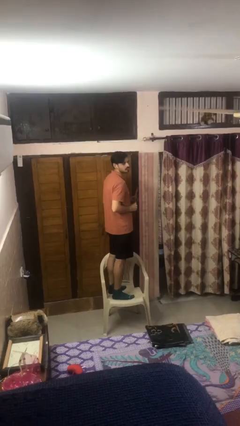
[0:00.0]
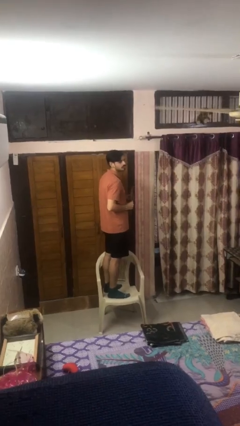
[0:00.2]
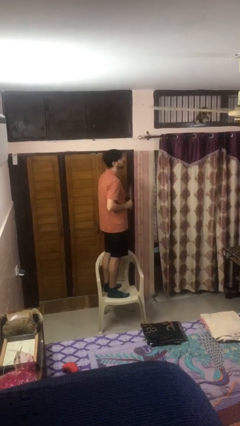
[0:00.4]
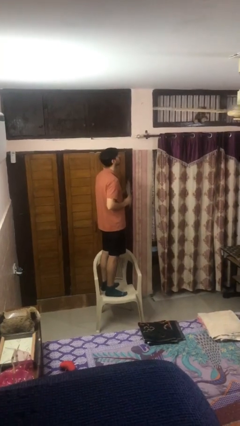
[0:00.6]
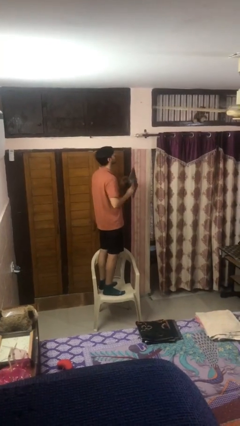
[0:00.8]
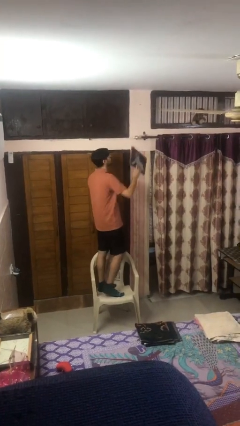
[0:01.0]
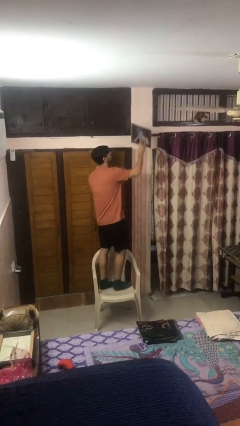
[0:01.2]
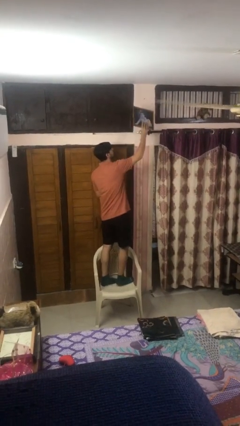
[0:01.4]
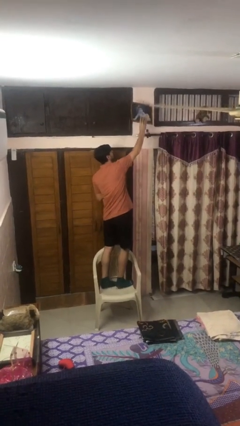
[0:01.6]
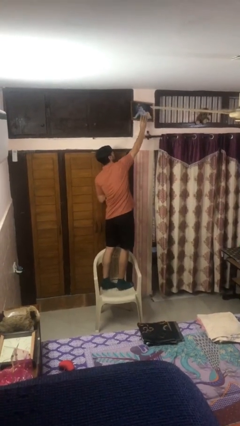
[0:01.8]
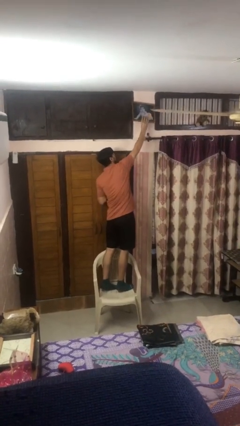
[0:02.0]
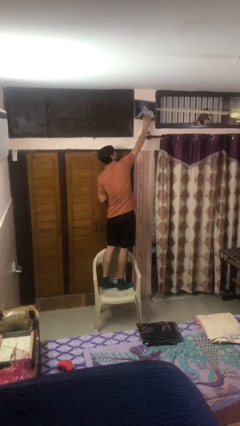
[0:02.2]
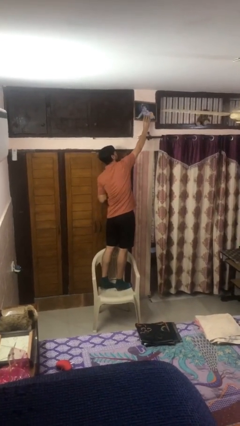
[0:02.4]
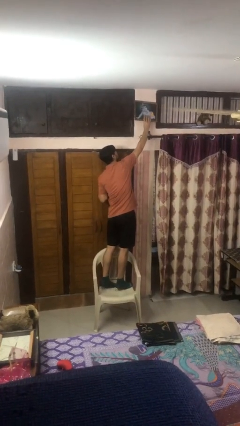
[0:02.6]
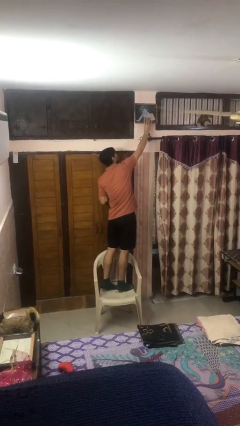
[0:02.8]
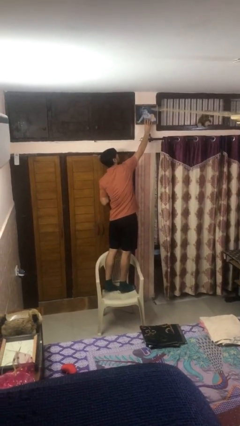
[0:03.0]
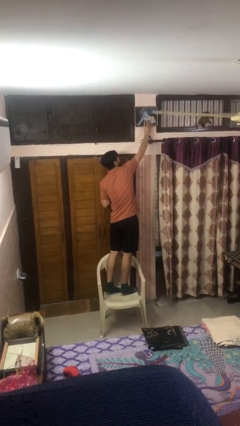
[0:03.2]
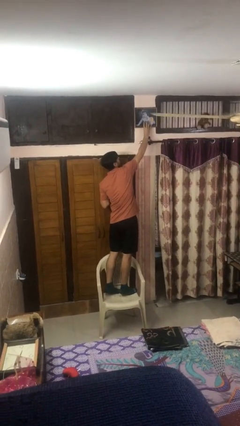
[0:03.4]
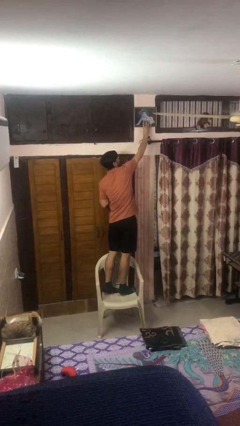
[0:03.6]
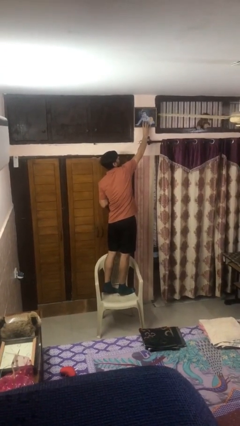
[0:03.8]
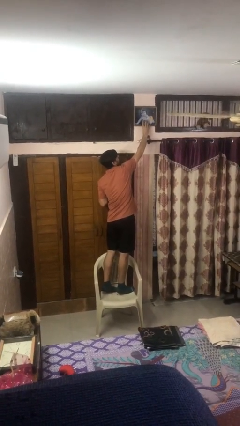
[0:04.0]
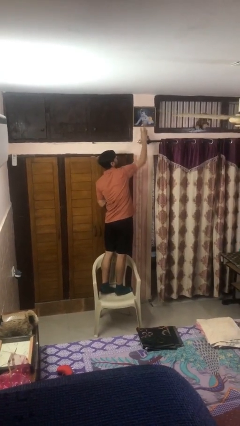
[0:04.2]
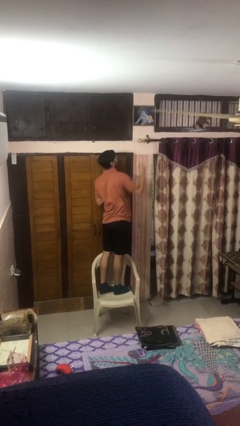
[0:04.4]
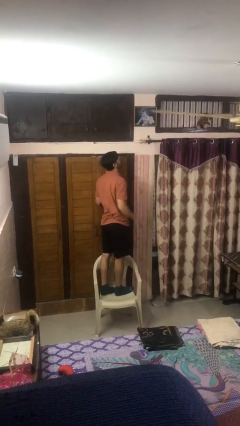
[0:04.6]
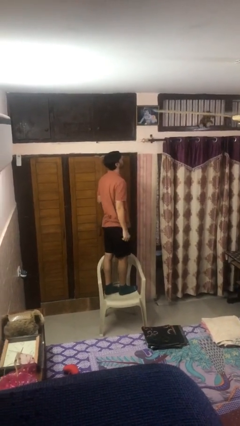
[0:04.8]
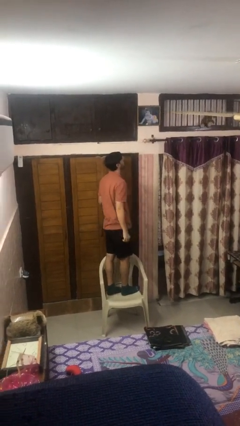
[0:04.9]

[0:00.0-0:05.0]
person puts up picture frame

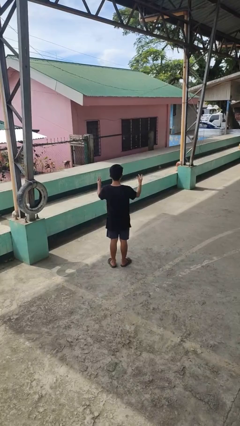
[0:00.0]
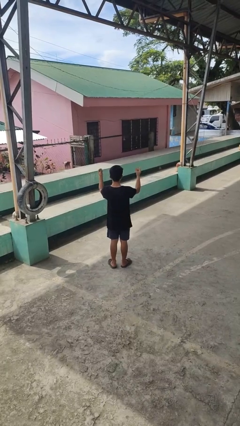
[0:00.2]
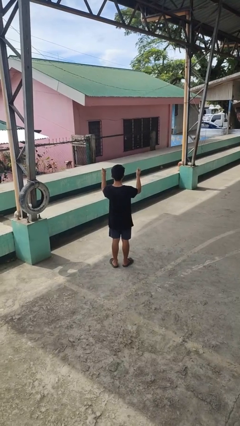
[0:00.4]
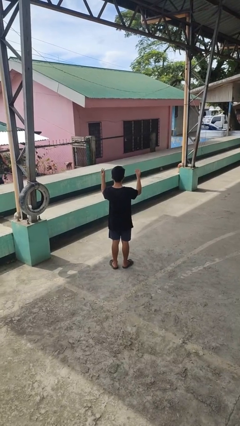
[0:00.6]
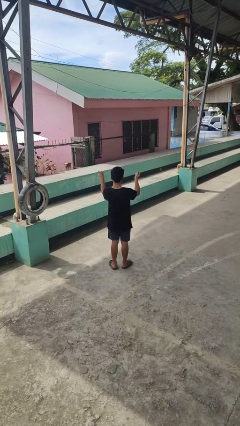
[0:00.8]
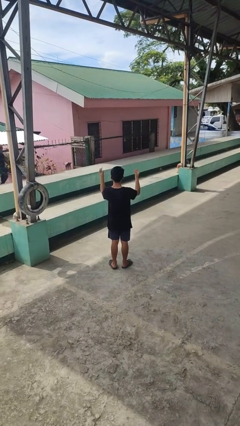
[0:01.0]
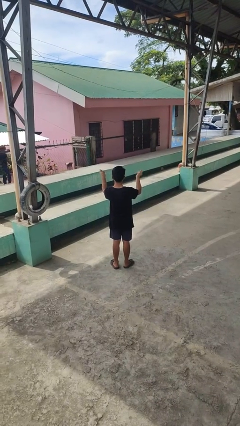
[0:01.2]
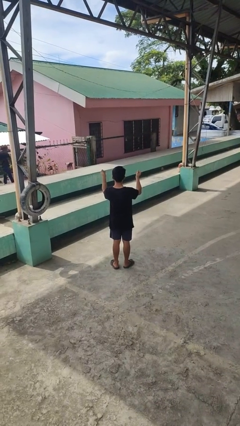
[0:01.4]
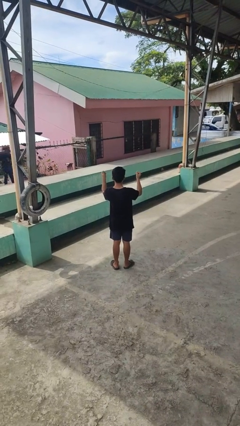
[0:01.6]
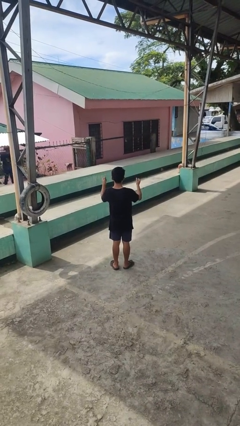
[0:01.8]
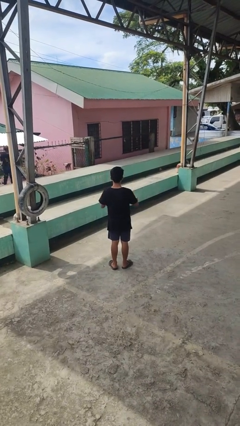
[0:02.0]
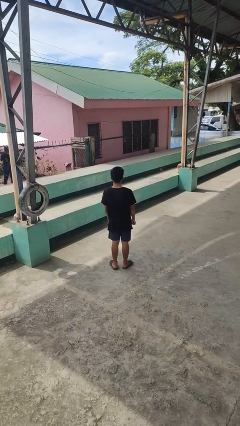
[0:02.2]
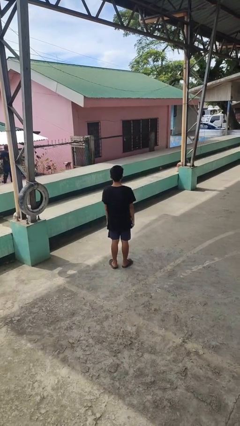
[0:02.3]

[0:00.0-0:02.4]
person snaps fingers

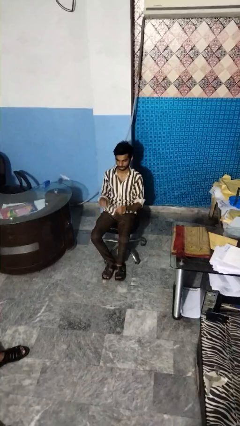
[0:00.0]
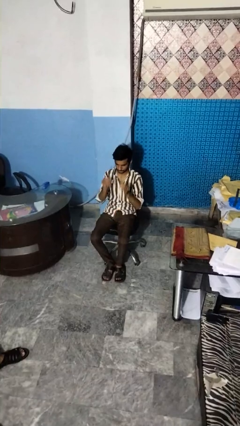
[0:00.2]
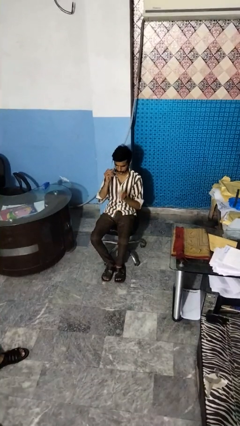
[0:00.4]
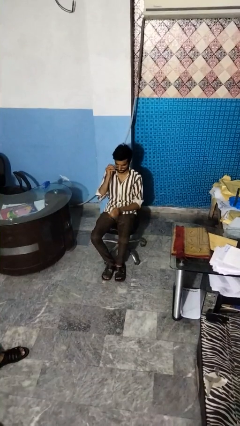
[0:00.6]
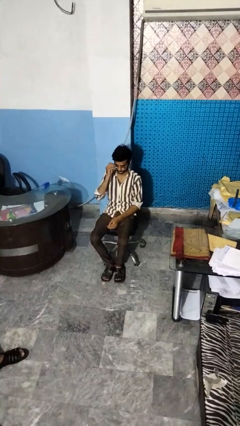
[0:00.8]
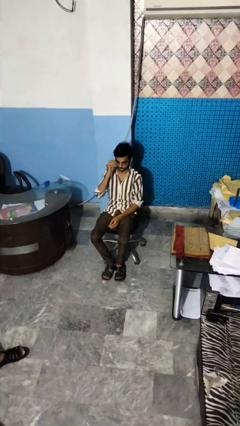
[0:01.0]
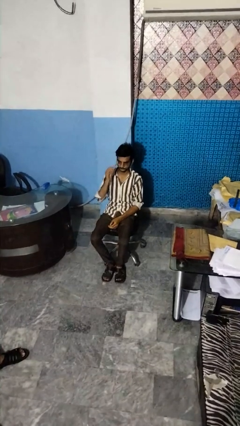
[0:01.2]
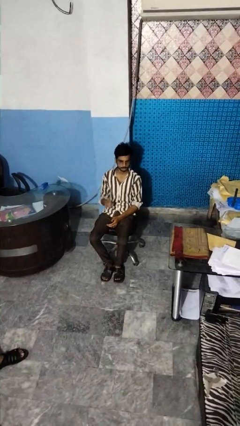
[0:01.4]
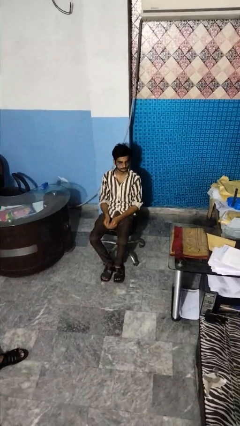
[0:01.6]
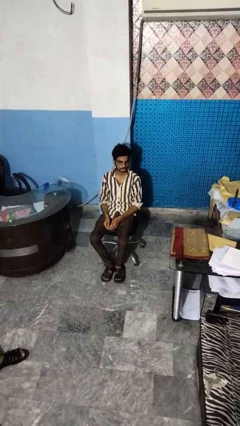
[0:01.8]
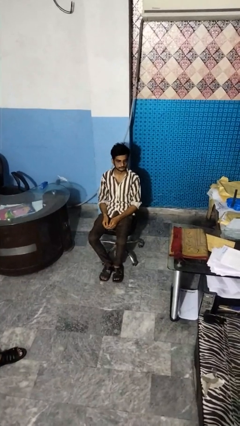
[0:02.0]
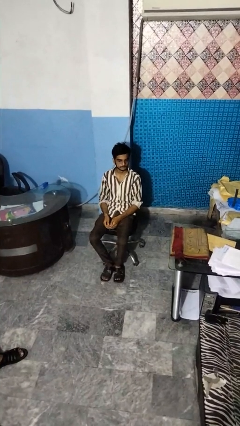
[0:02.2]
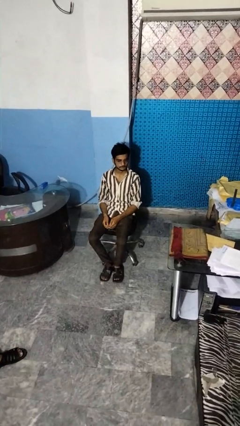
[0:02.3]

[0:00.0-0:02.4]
person puts on glasses

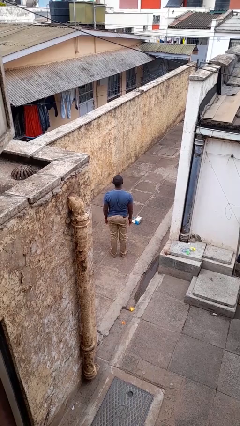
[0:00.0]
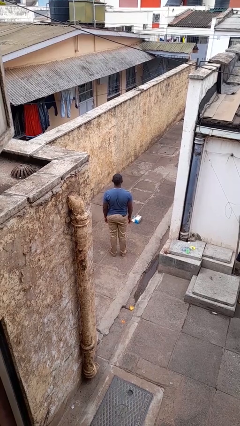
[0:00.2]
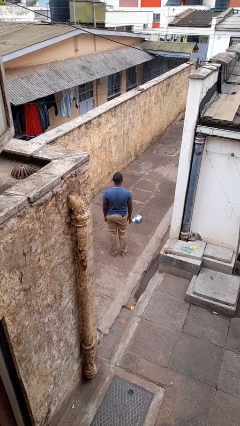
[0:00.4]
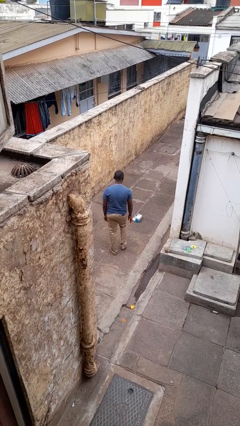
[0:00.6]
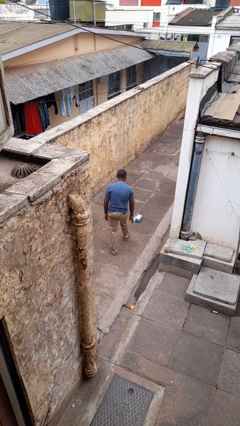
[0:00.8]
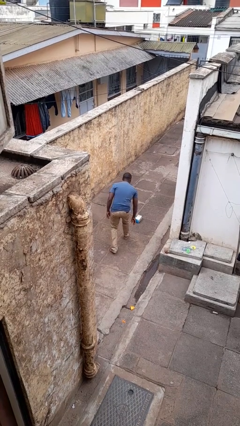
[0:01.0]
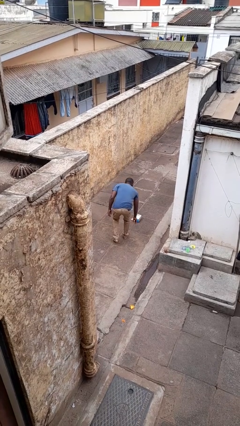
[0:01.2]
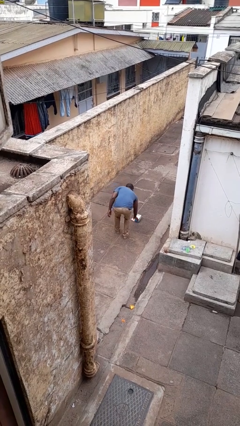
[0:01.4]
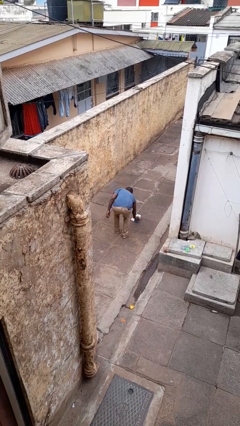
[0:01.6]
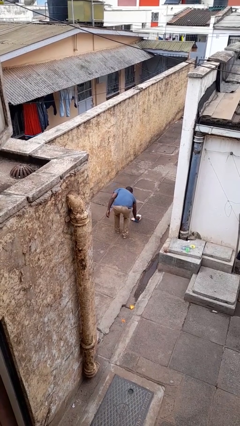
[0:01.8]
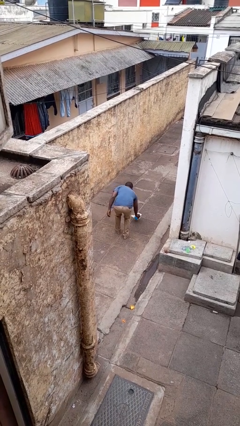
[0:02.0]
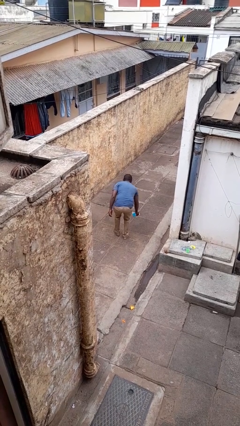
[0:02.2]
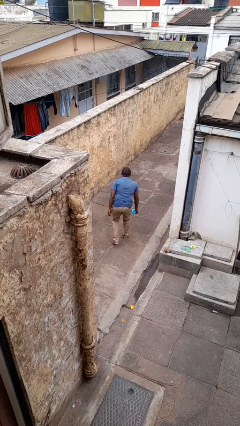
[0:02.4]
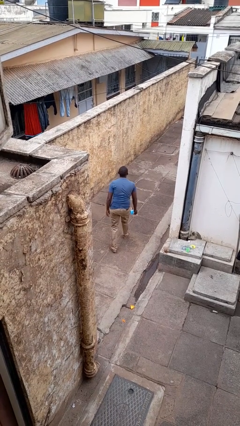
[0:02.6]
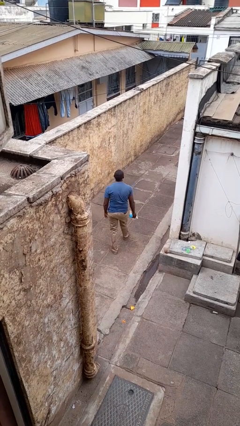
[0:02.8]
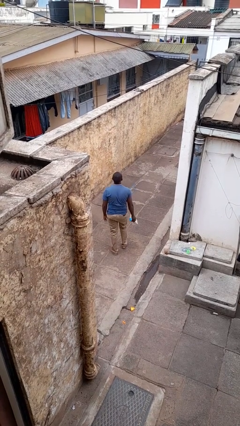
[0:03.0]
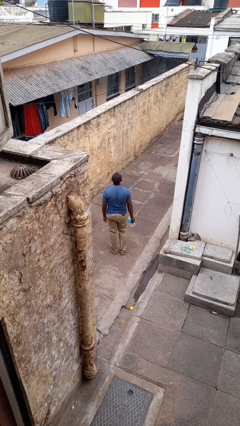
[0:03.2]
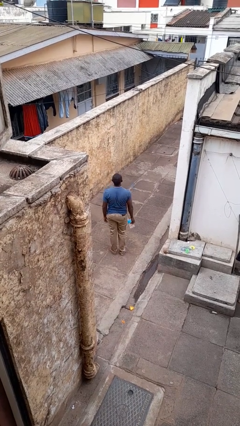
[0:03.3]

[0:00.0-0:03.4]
person picks up object from floor

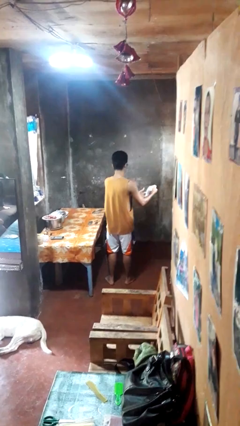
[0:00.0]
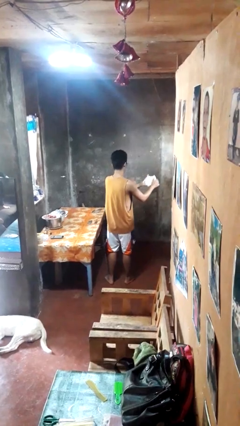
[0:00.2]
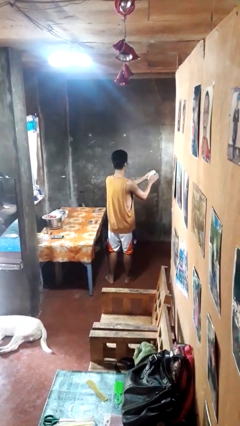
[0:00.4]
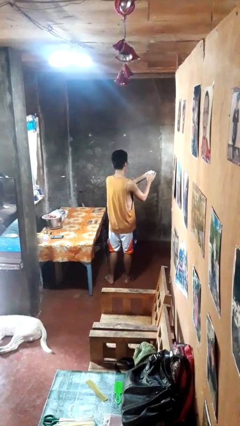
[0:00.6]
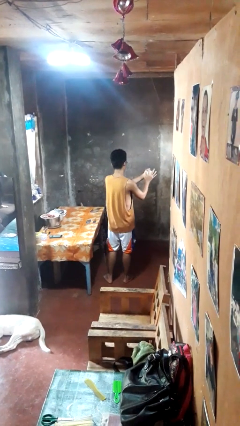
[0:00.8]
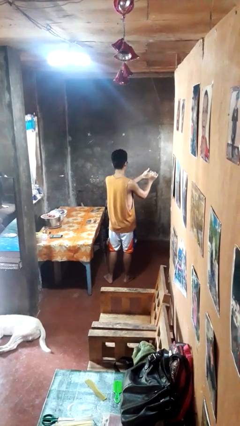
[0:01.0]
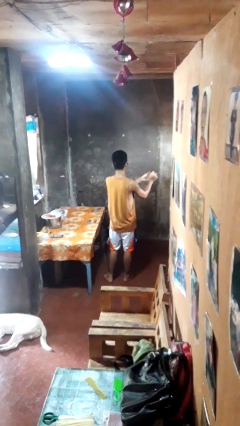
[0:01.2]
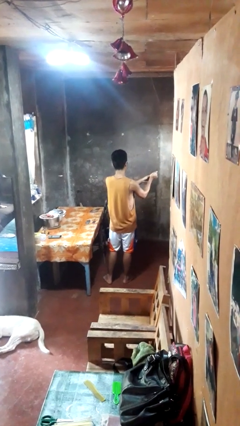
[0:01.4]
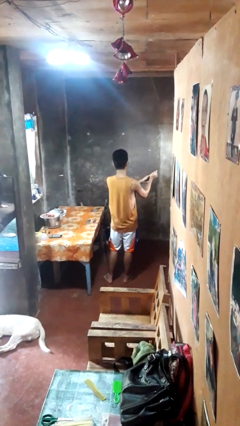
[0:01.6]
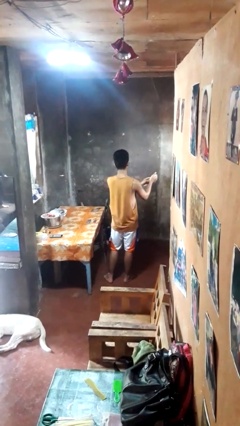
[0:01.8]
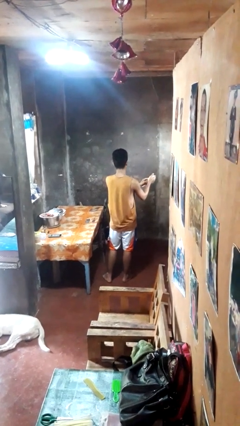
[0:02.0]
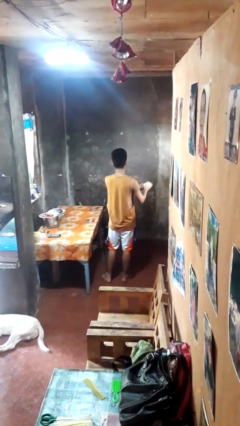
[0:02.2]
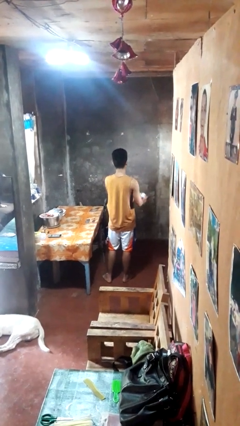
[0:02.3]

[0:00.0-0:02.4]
person crumples paper

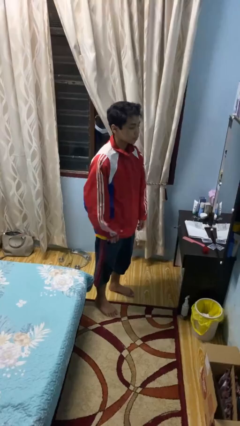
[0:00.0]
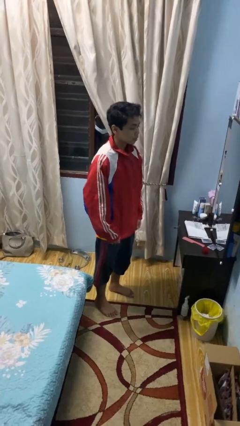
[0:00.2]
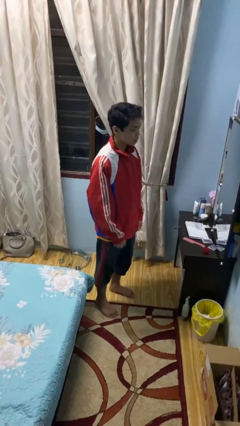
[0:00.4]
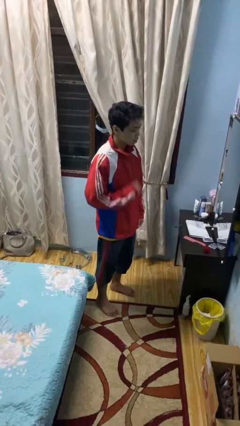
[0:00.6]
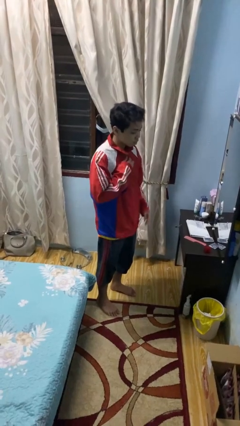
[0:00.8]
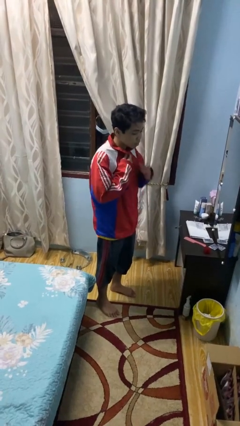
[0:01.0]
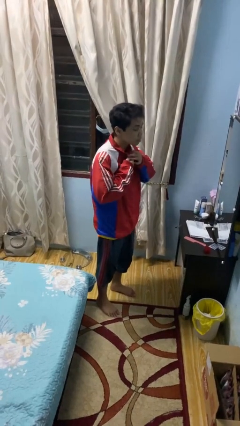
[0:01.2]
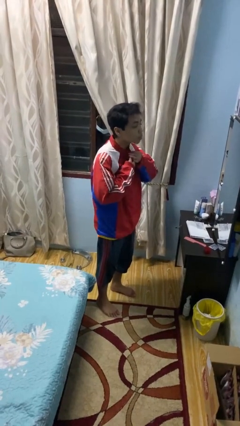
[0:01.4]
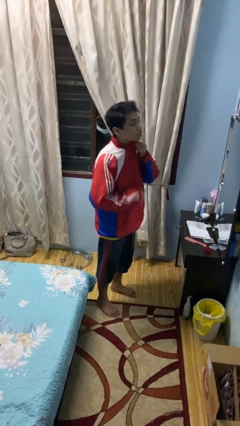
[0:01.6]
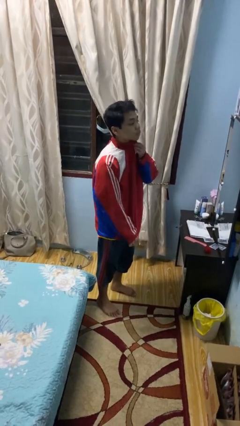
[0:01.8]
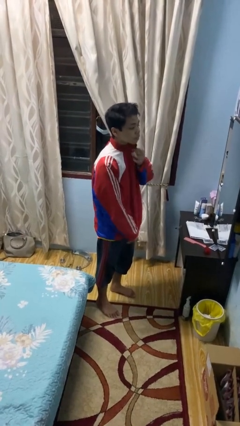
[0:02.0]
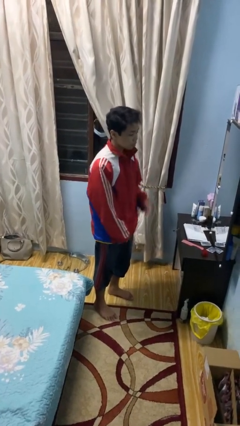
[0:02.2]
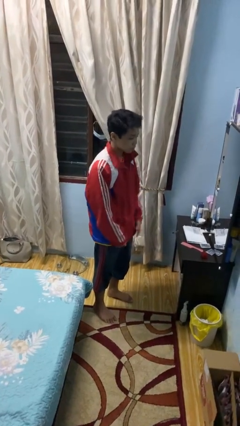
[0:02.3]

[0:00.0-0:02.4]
person unzips jacket
